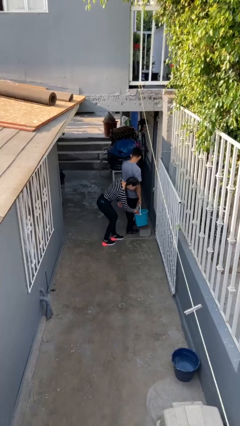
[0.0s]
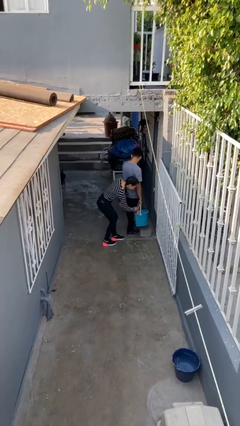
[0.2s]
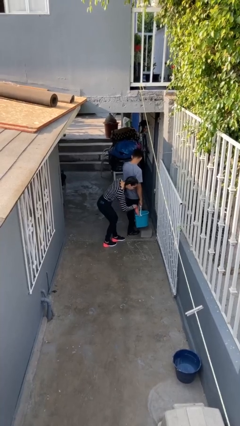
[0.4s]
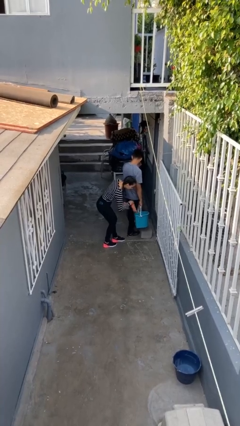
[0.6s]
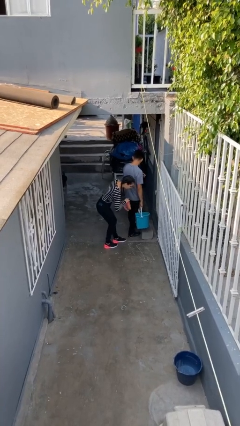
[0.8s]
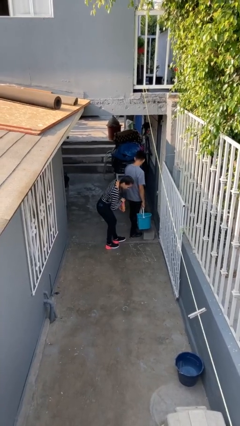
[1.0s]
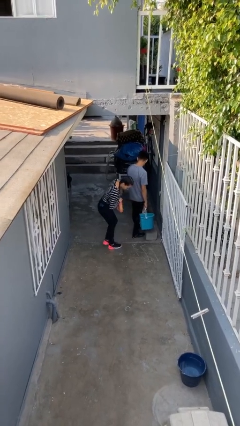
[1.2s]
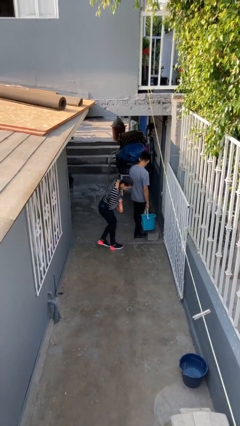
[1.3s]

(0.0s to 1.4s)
person steals object from person

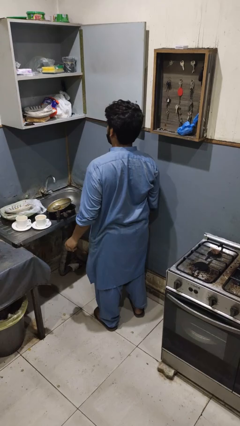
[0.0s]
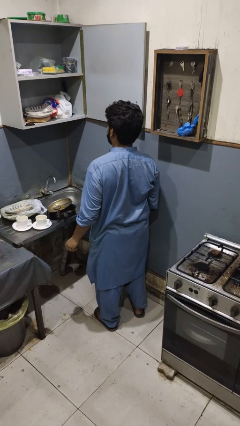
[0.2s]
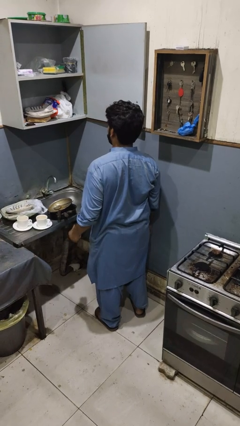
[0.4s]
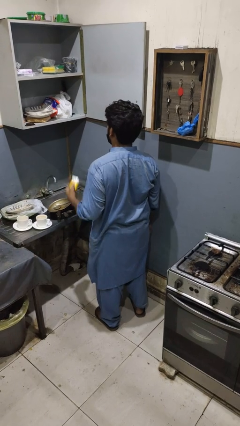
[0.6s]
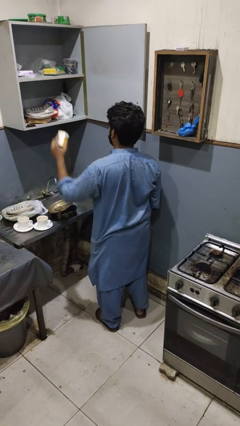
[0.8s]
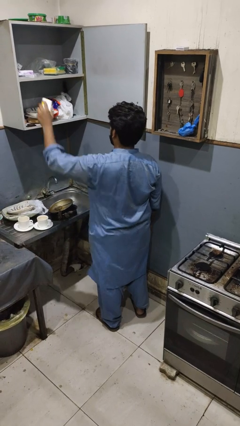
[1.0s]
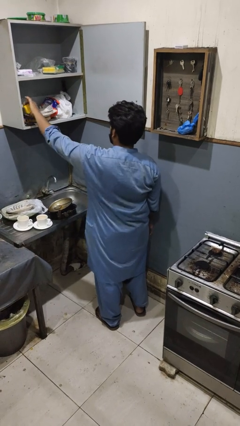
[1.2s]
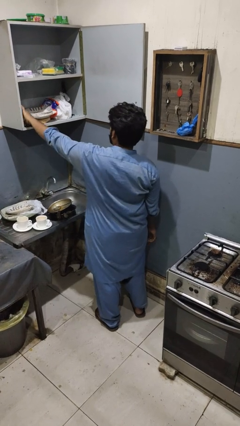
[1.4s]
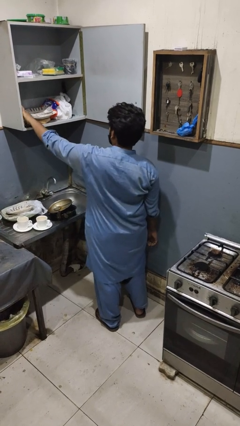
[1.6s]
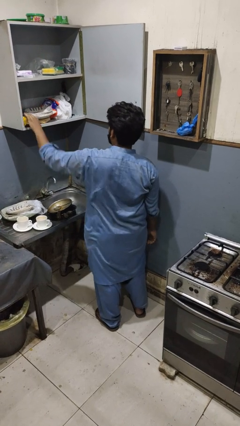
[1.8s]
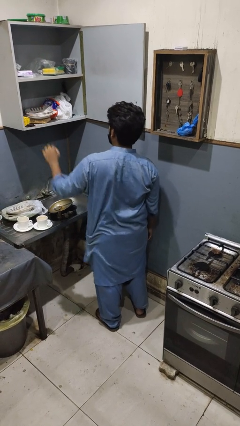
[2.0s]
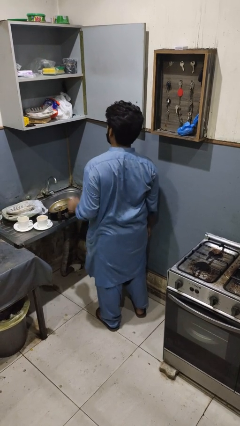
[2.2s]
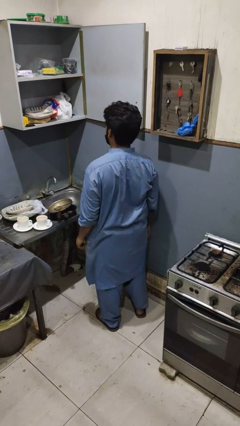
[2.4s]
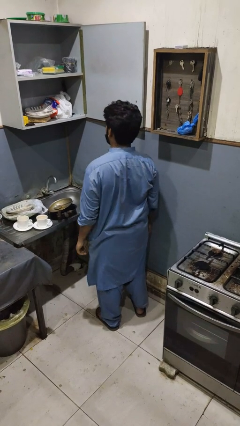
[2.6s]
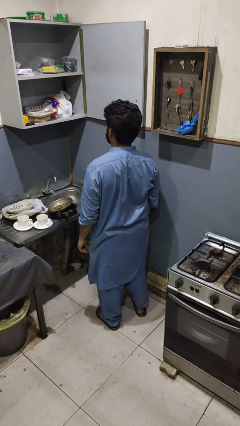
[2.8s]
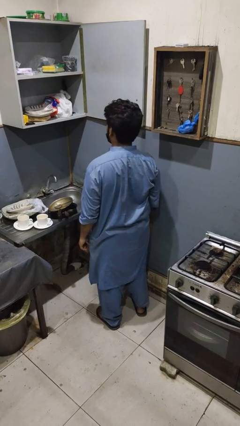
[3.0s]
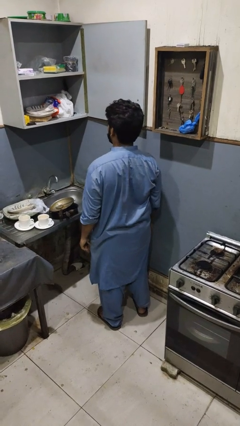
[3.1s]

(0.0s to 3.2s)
person puts object in cabinet

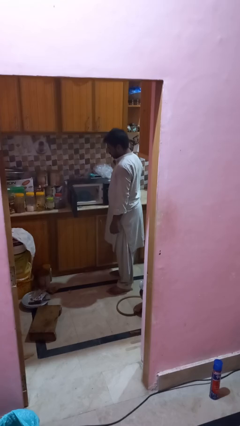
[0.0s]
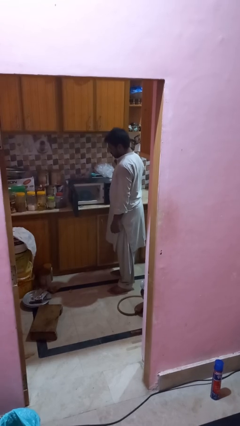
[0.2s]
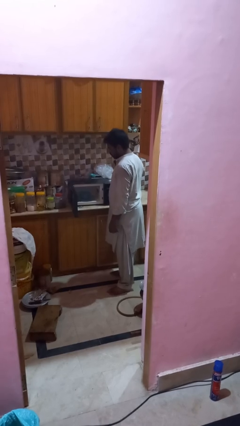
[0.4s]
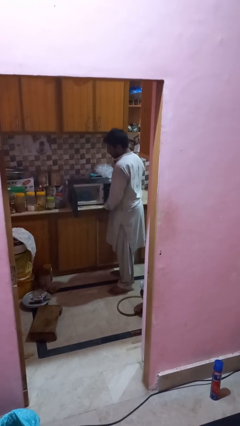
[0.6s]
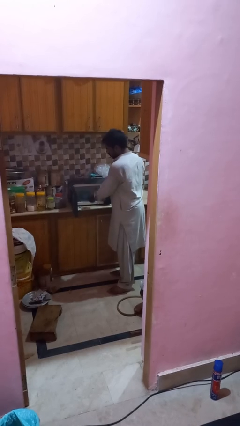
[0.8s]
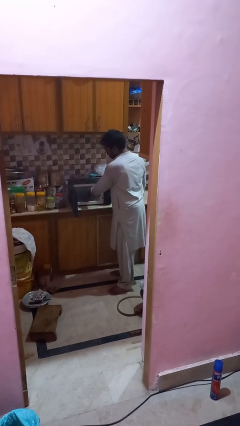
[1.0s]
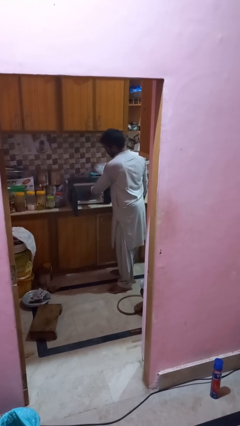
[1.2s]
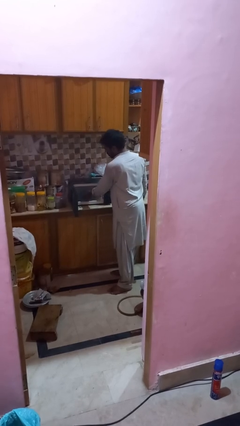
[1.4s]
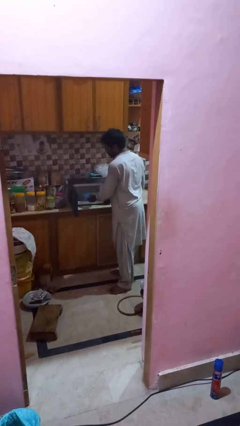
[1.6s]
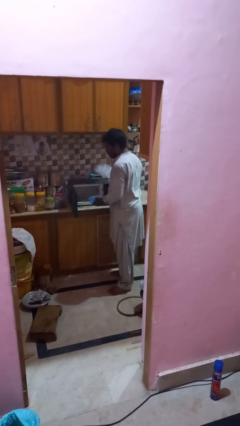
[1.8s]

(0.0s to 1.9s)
person takes object from microwave

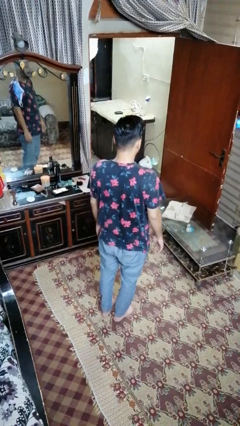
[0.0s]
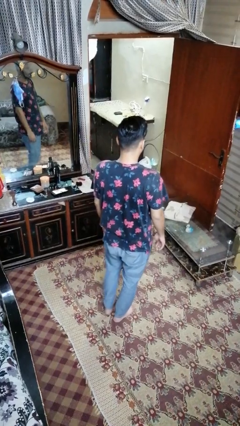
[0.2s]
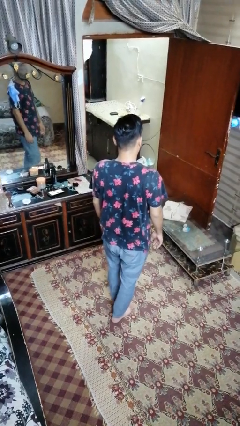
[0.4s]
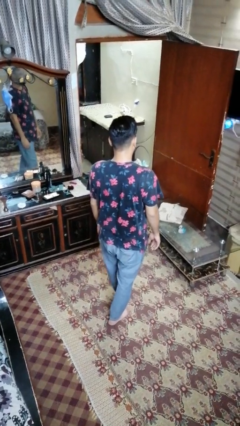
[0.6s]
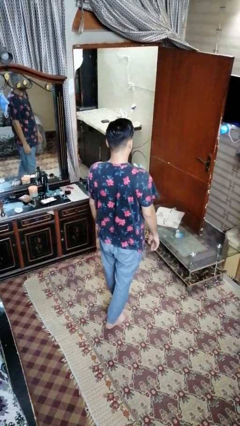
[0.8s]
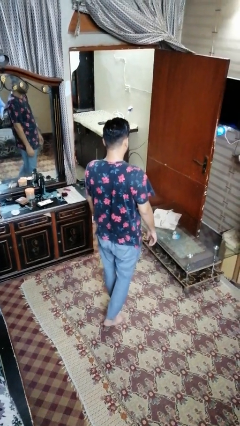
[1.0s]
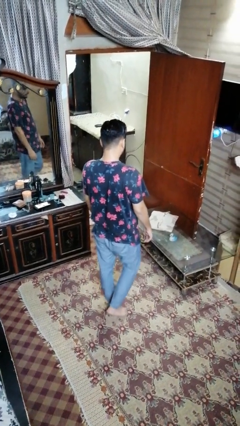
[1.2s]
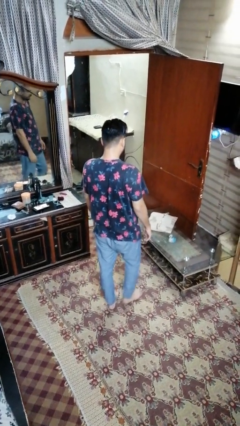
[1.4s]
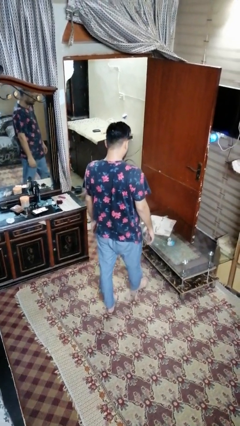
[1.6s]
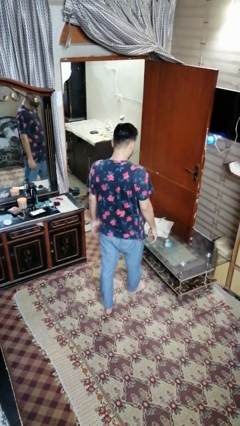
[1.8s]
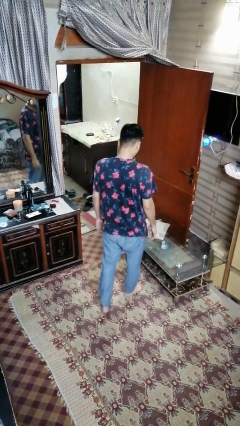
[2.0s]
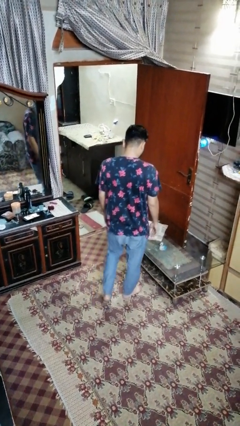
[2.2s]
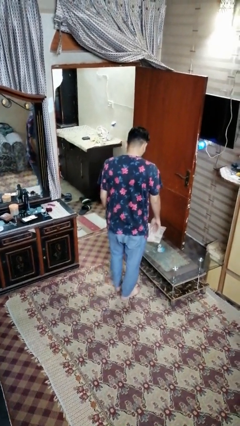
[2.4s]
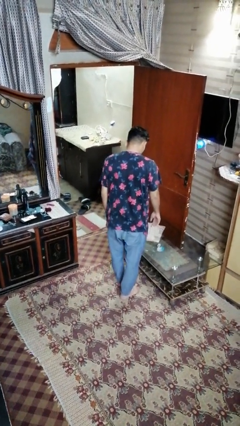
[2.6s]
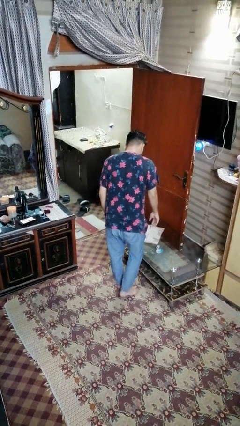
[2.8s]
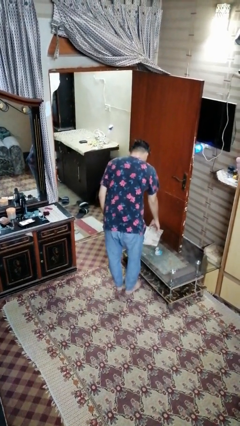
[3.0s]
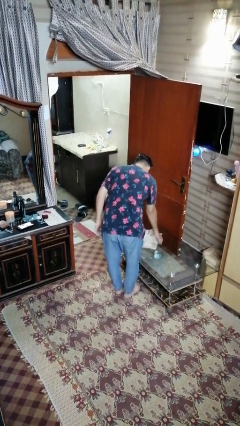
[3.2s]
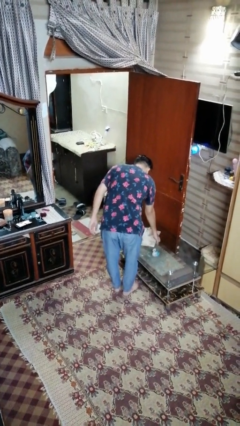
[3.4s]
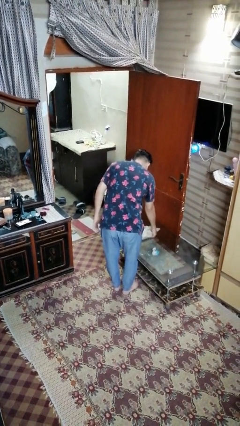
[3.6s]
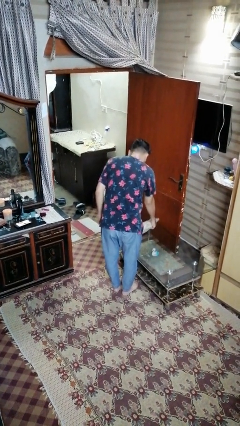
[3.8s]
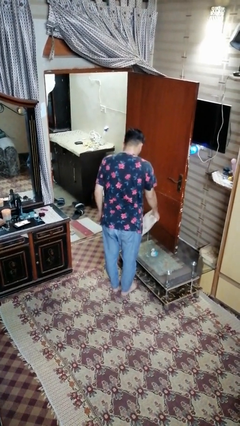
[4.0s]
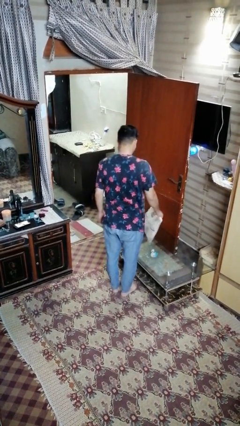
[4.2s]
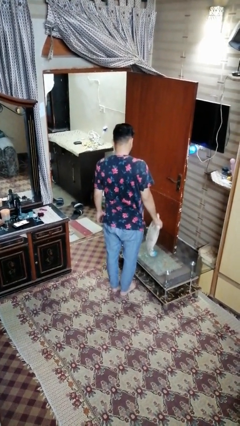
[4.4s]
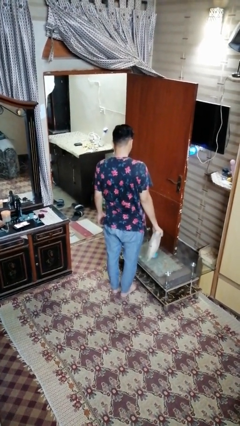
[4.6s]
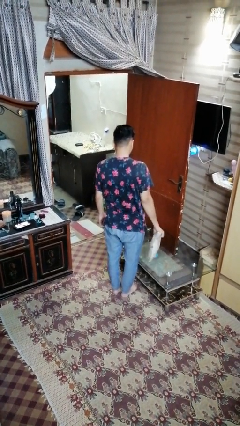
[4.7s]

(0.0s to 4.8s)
person picks up object from table

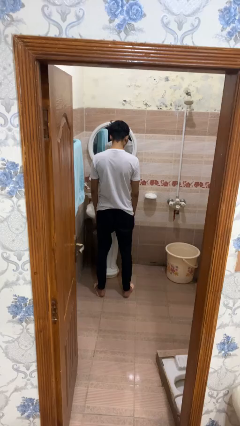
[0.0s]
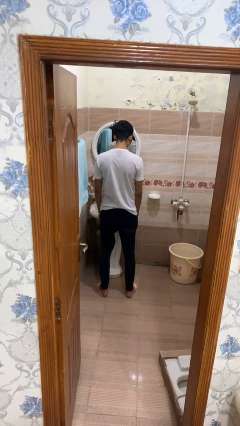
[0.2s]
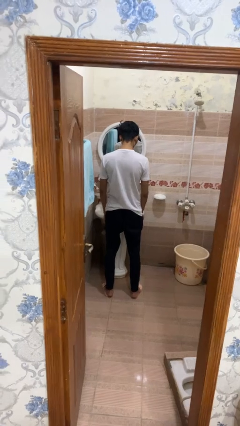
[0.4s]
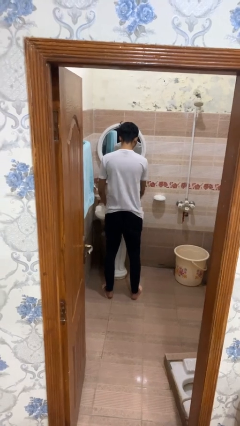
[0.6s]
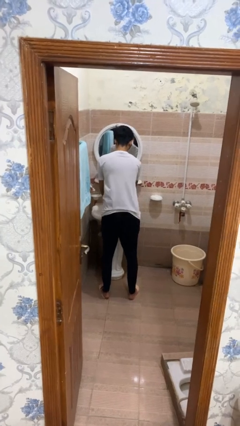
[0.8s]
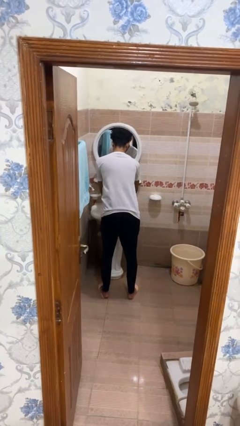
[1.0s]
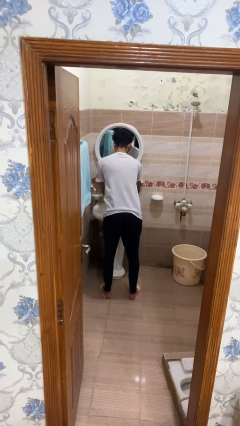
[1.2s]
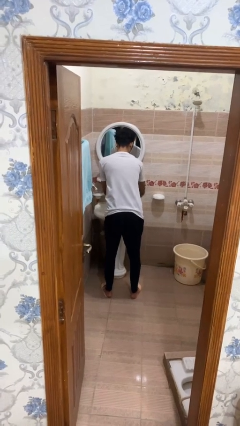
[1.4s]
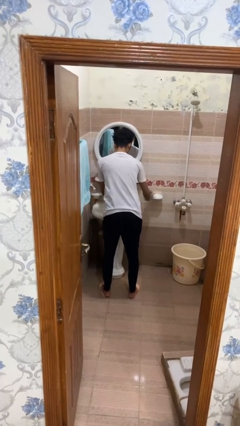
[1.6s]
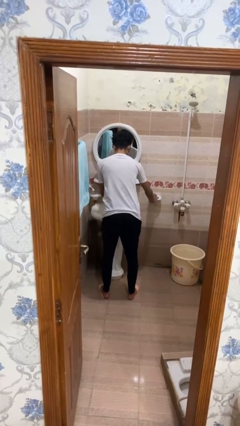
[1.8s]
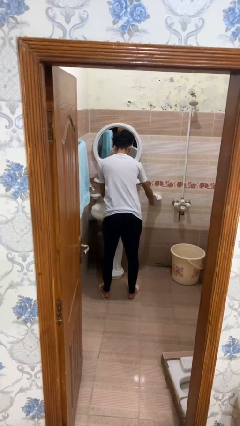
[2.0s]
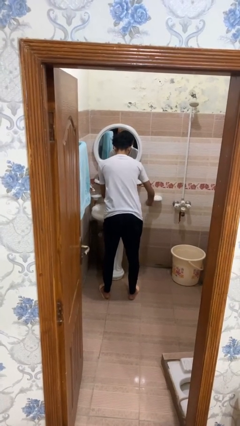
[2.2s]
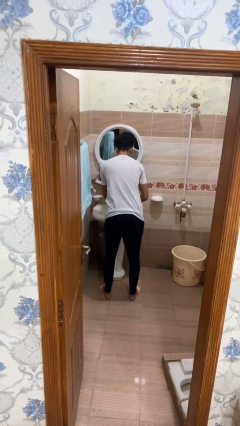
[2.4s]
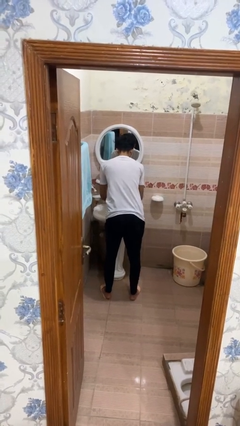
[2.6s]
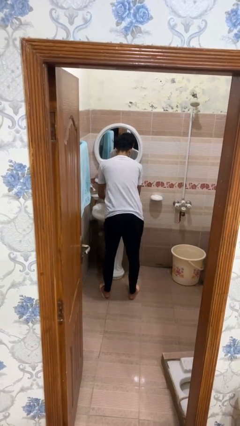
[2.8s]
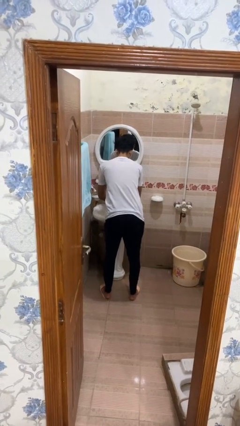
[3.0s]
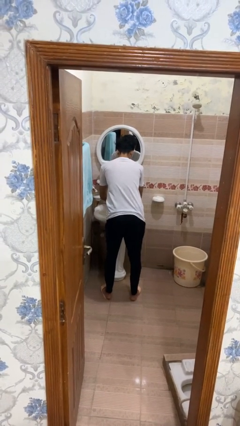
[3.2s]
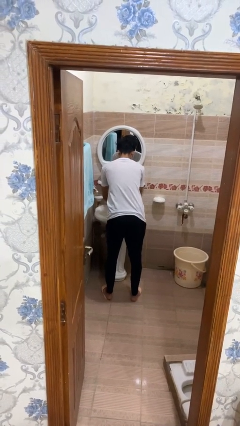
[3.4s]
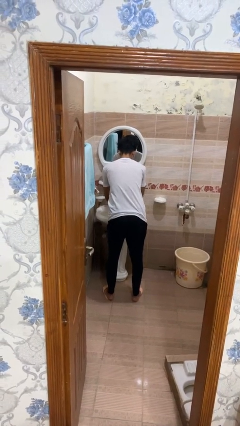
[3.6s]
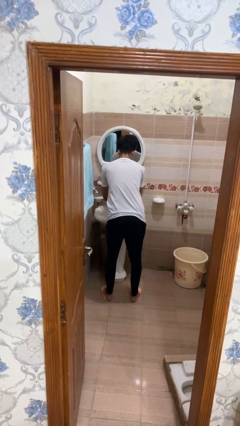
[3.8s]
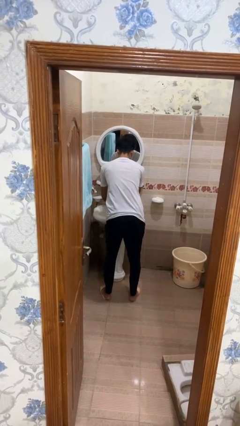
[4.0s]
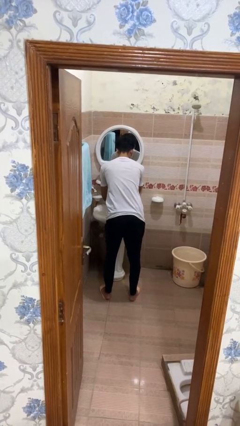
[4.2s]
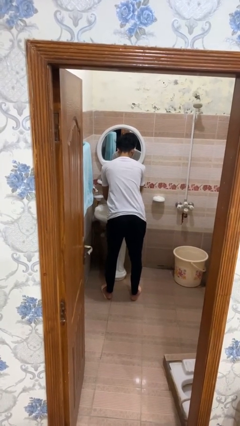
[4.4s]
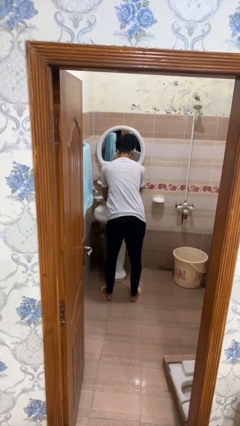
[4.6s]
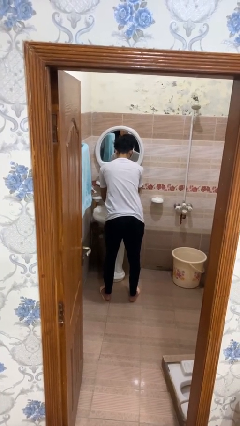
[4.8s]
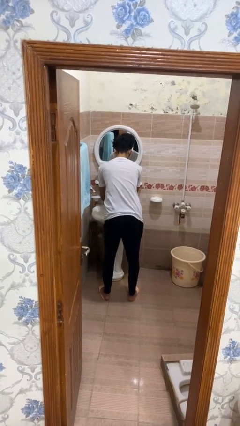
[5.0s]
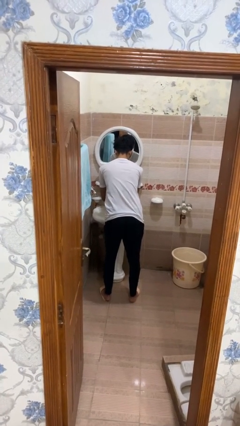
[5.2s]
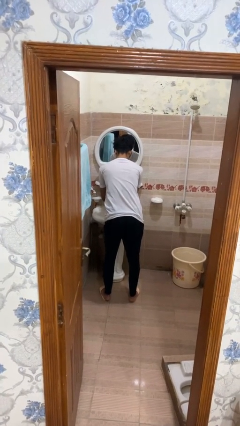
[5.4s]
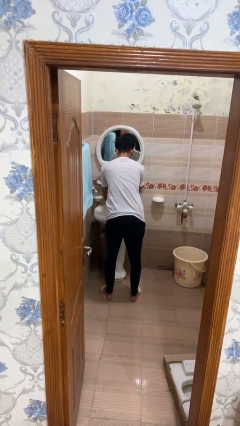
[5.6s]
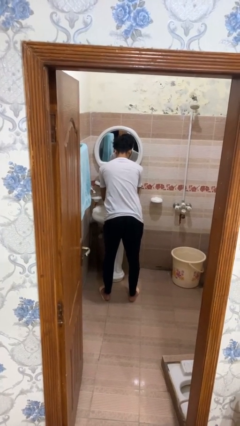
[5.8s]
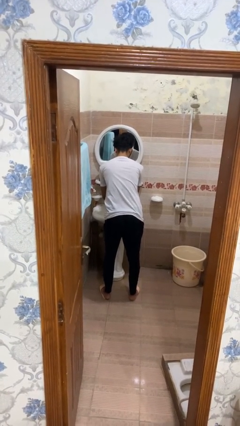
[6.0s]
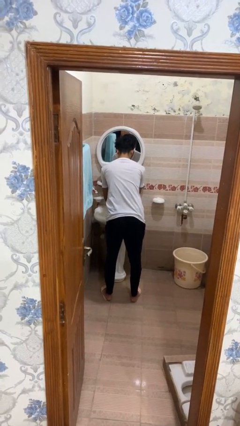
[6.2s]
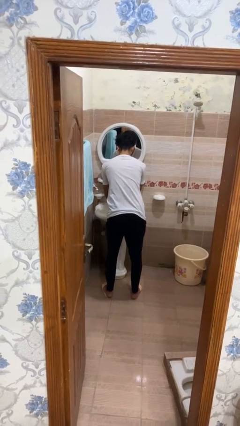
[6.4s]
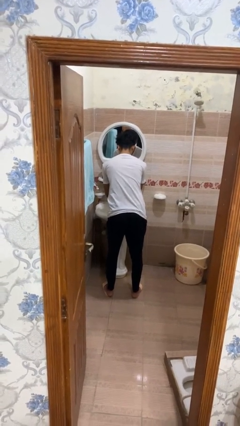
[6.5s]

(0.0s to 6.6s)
person washes hands
